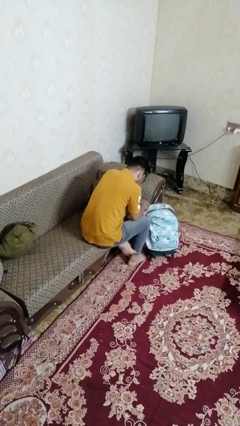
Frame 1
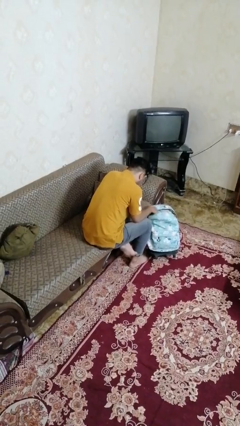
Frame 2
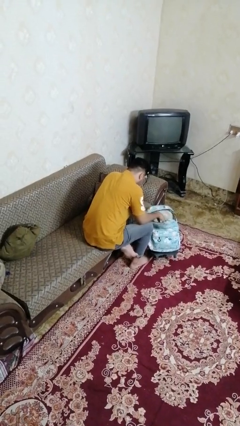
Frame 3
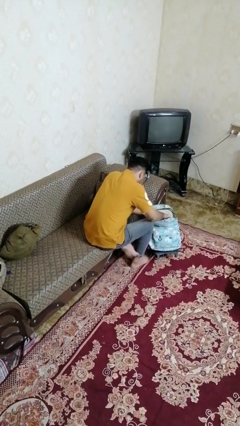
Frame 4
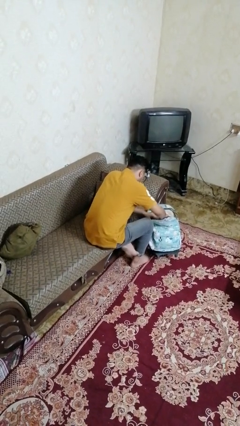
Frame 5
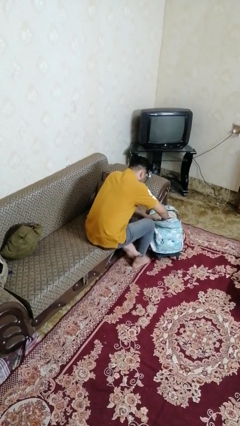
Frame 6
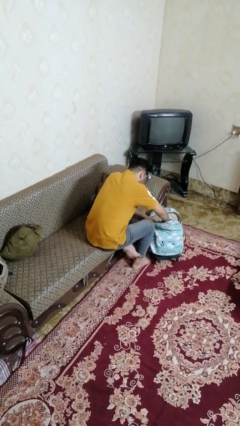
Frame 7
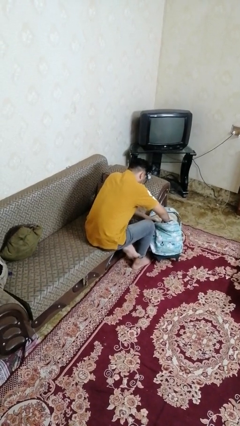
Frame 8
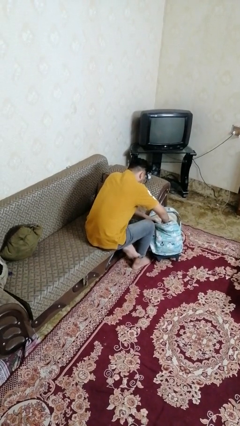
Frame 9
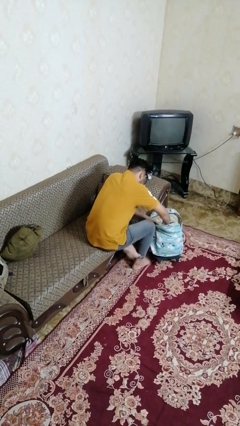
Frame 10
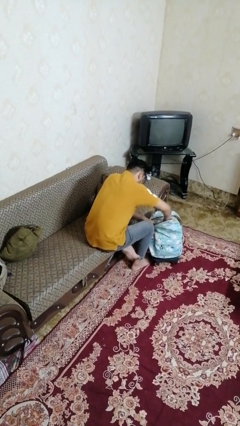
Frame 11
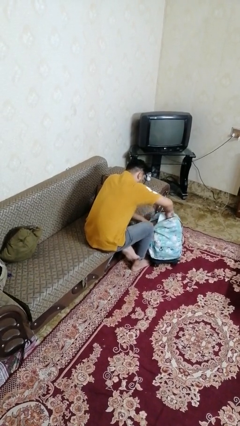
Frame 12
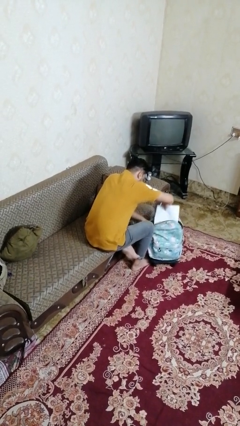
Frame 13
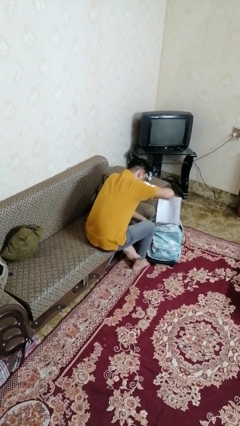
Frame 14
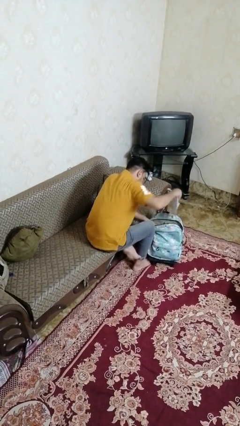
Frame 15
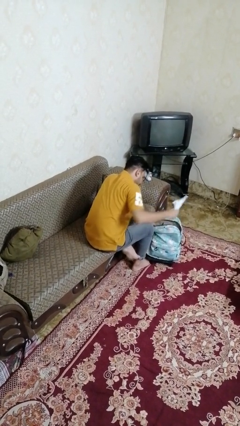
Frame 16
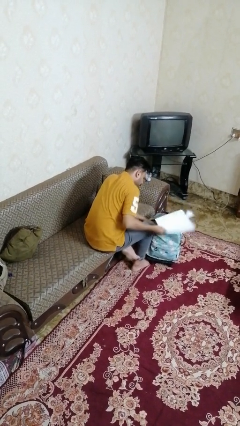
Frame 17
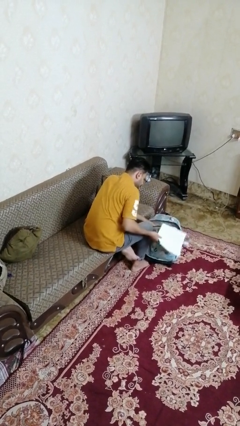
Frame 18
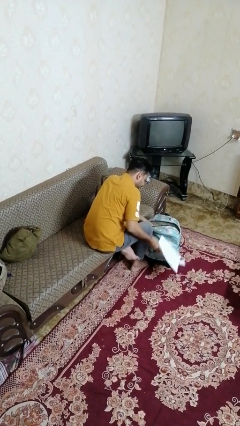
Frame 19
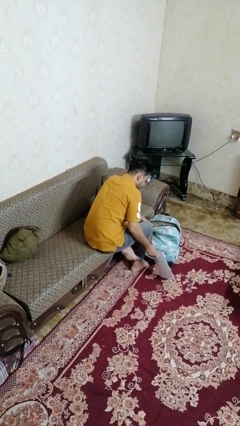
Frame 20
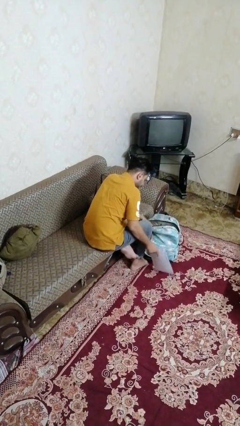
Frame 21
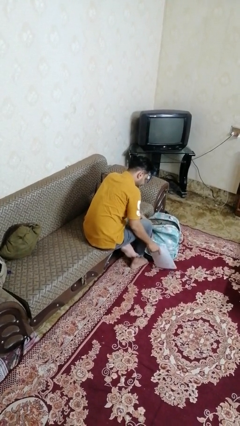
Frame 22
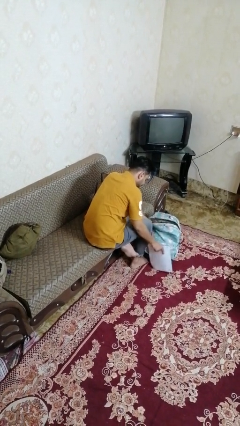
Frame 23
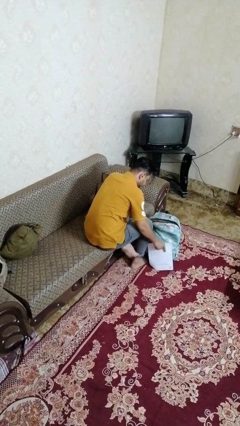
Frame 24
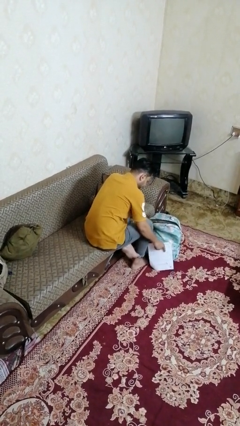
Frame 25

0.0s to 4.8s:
person takes object from bag

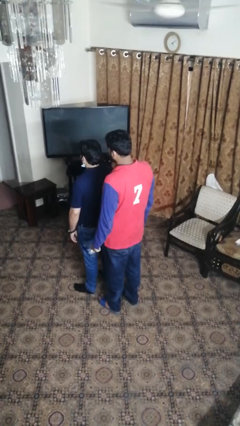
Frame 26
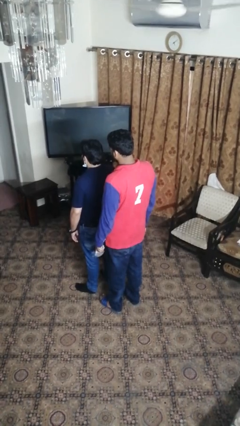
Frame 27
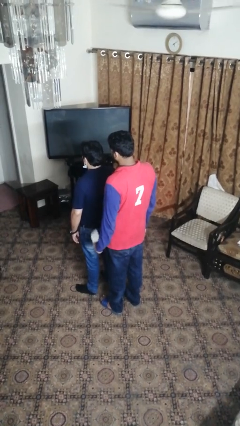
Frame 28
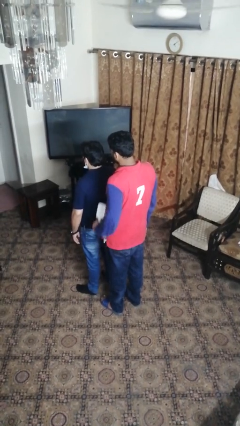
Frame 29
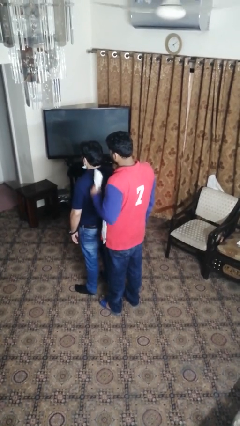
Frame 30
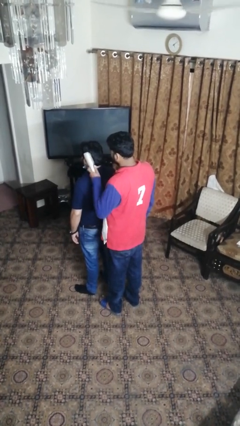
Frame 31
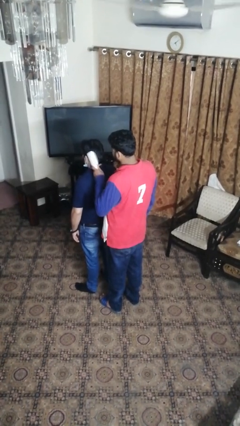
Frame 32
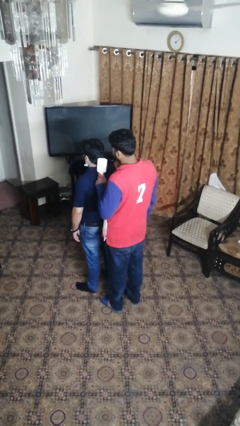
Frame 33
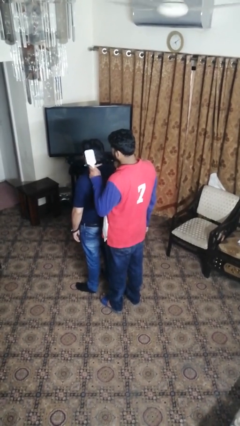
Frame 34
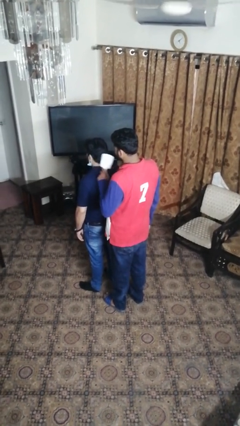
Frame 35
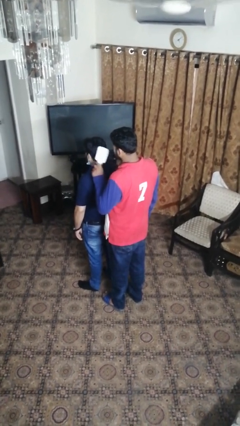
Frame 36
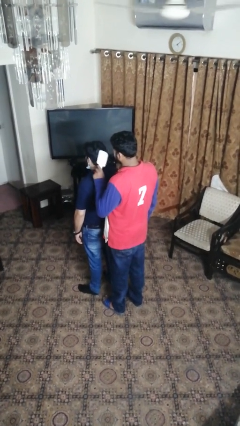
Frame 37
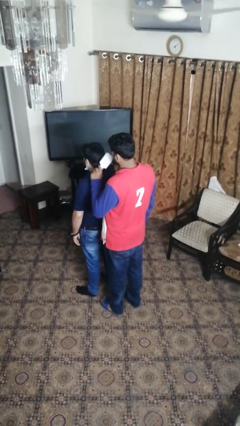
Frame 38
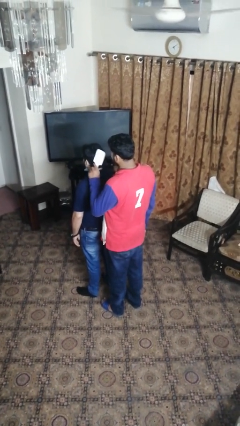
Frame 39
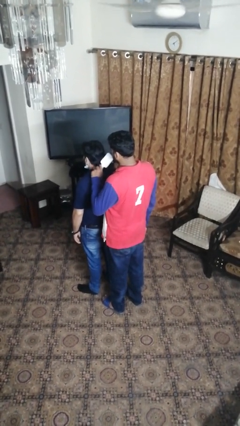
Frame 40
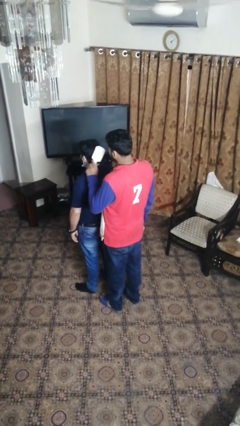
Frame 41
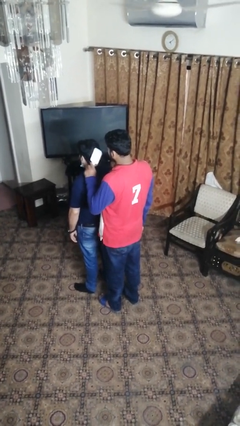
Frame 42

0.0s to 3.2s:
person brushes hair of person

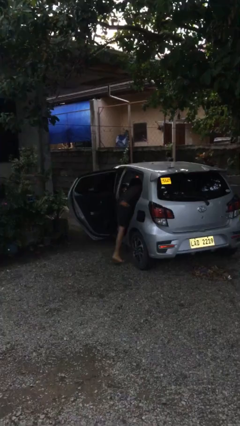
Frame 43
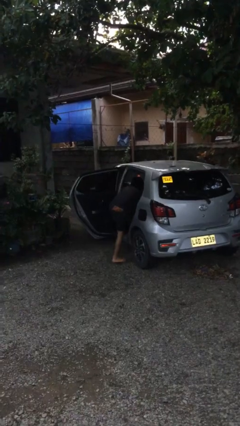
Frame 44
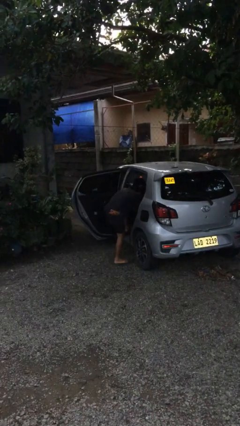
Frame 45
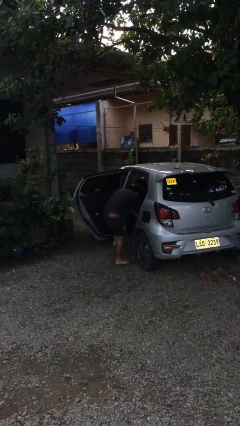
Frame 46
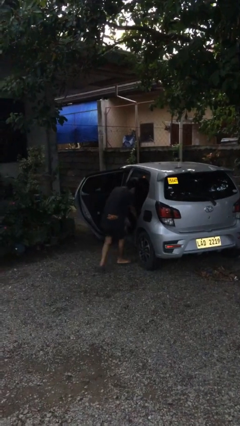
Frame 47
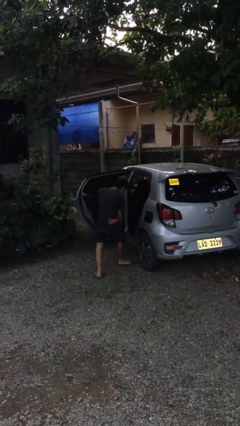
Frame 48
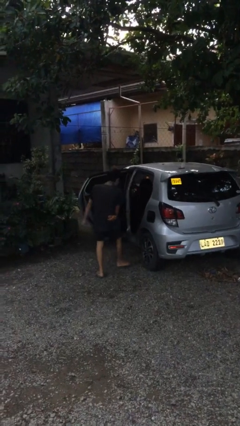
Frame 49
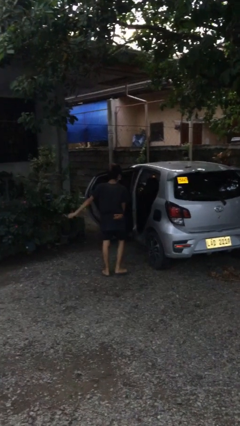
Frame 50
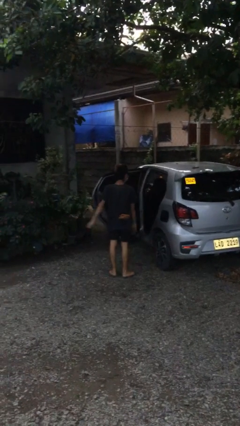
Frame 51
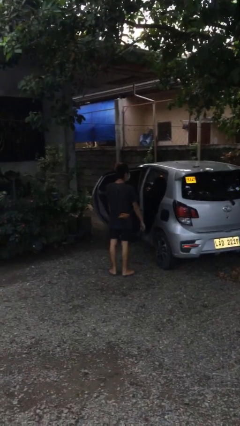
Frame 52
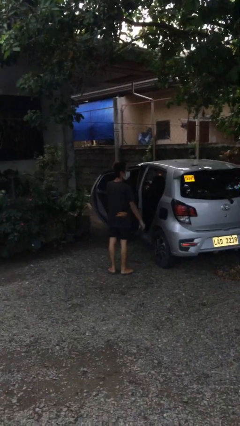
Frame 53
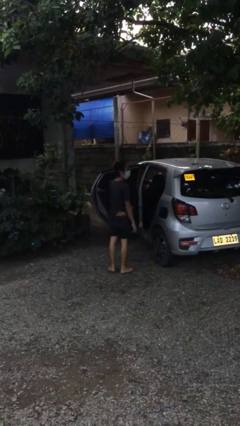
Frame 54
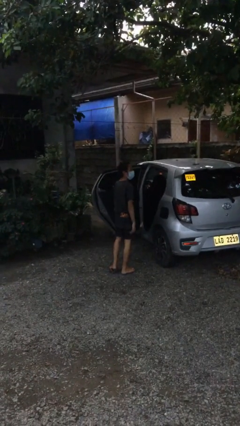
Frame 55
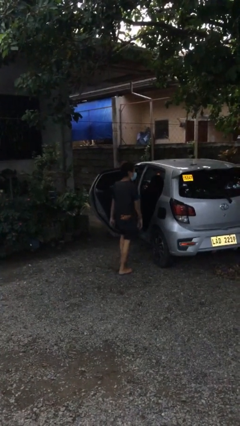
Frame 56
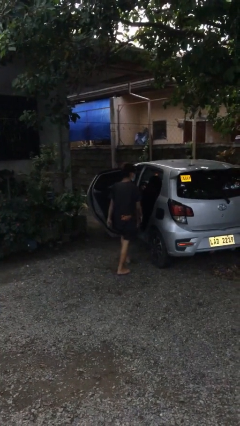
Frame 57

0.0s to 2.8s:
person exits car

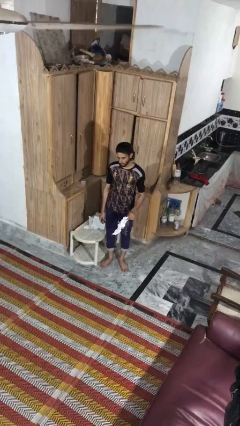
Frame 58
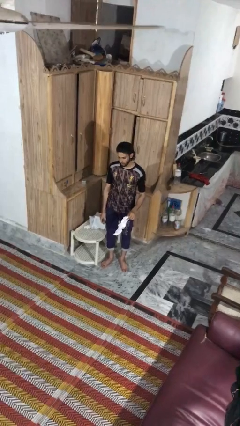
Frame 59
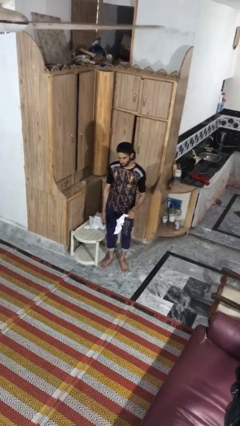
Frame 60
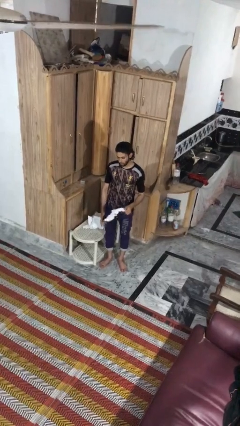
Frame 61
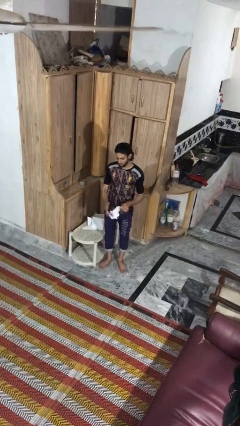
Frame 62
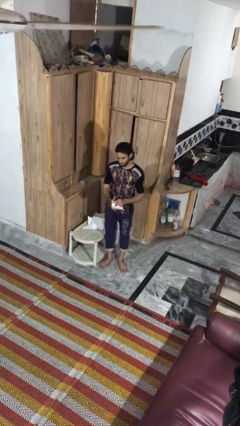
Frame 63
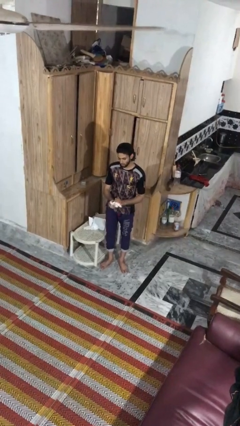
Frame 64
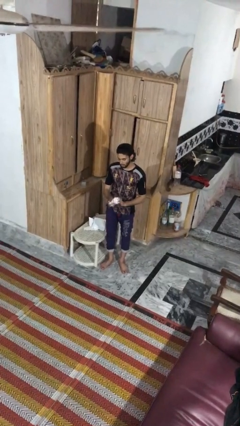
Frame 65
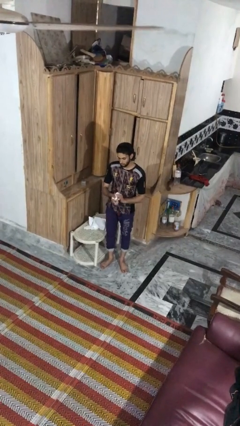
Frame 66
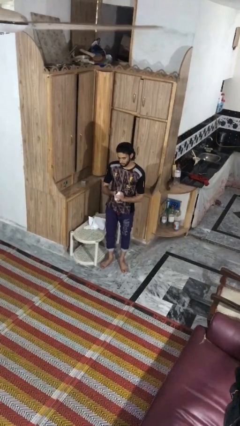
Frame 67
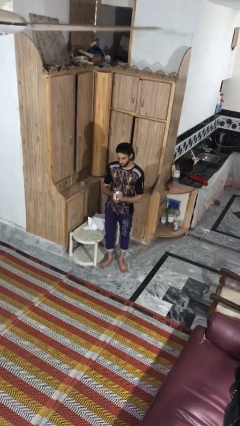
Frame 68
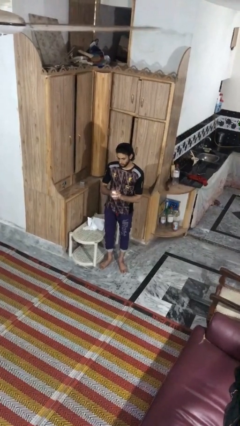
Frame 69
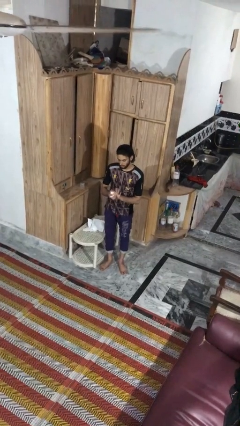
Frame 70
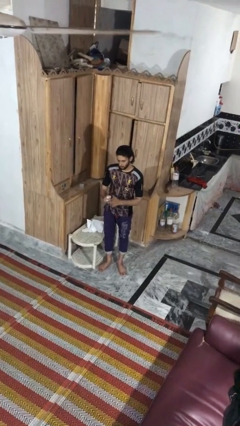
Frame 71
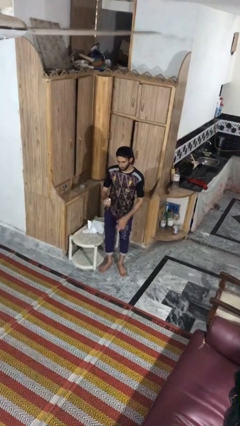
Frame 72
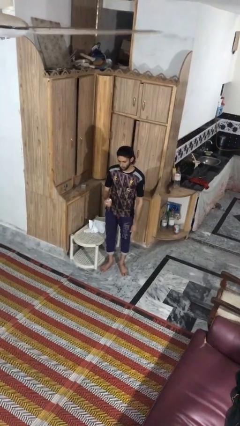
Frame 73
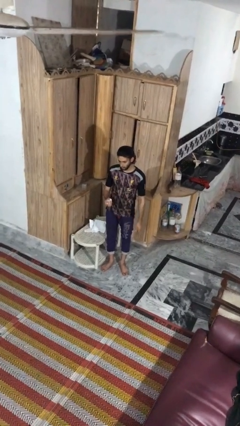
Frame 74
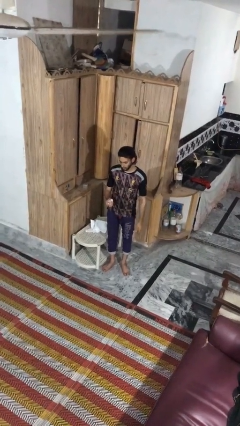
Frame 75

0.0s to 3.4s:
person crumples paper

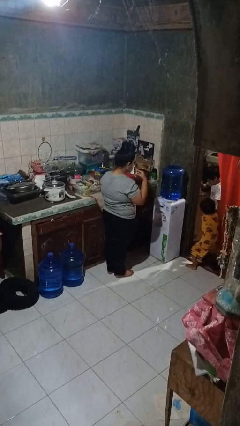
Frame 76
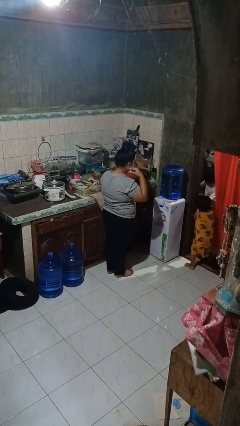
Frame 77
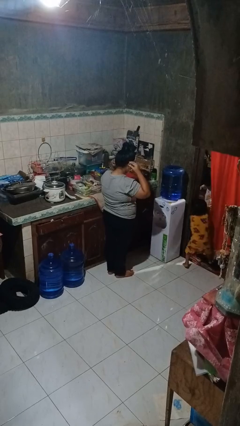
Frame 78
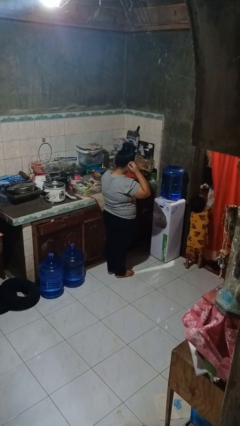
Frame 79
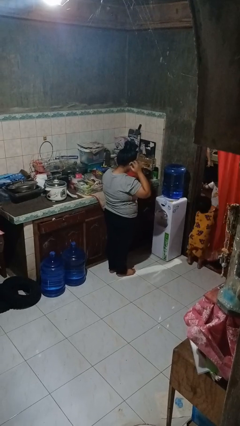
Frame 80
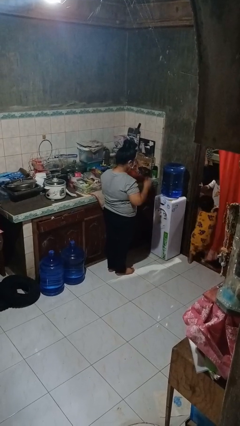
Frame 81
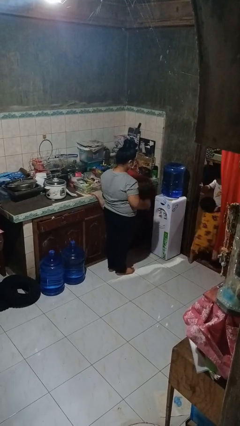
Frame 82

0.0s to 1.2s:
person puts on facemask

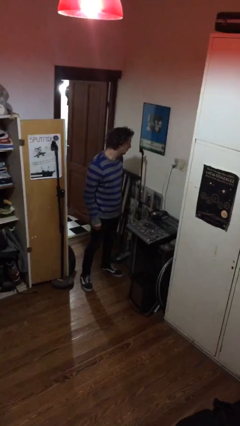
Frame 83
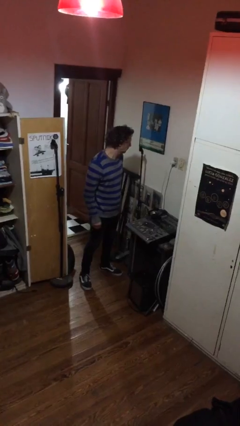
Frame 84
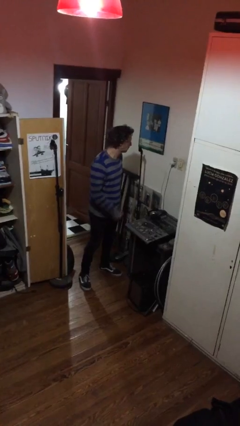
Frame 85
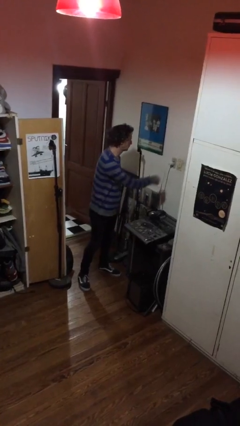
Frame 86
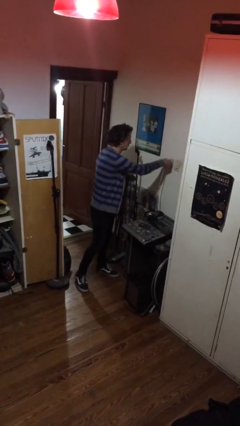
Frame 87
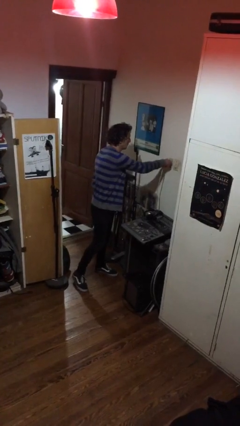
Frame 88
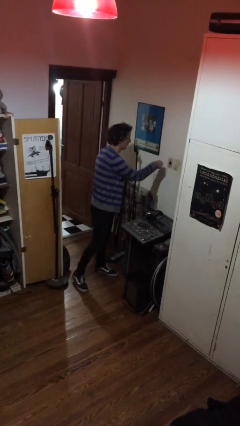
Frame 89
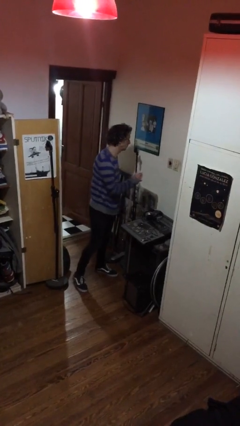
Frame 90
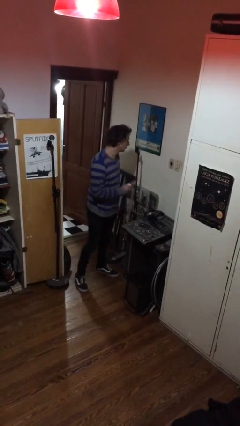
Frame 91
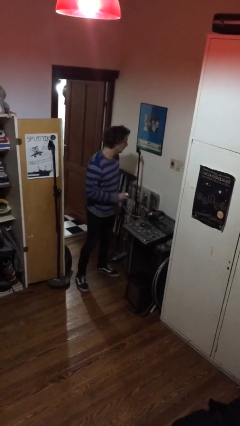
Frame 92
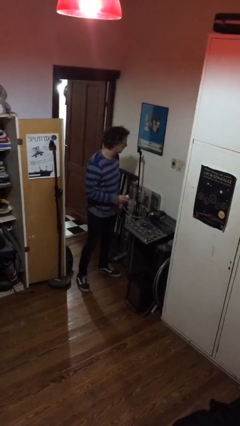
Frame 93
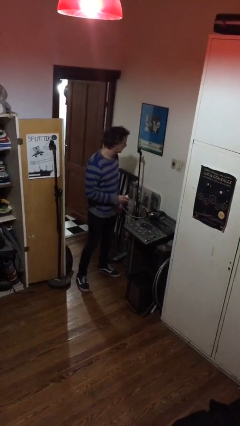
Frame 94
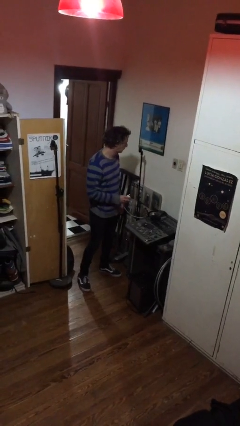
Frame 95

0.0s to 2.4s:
person unplugs from electrical socket
